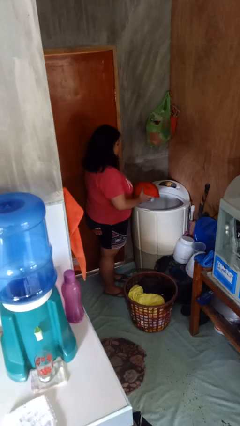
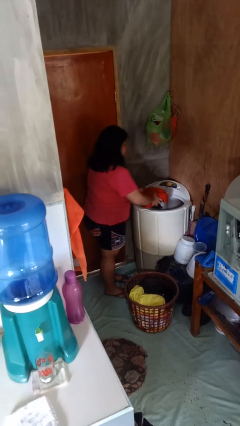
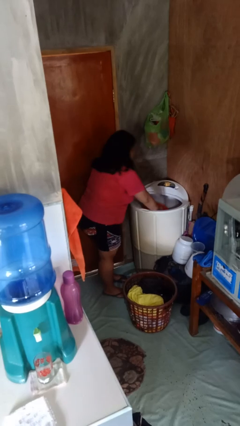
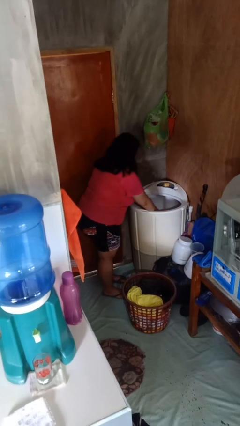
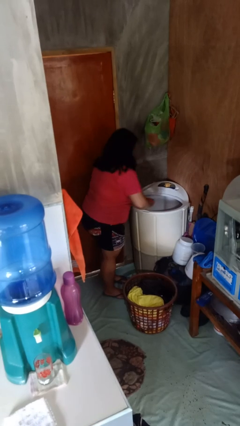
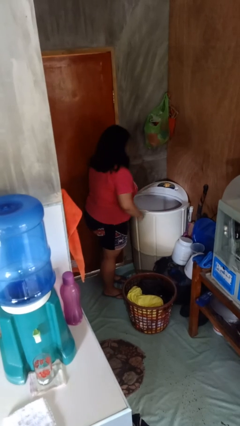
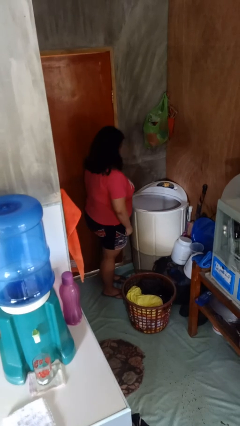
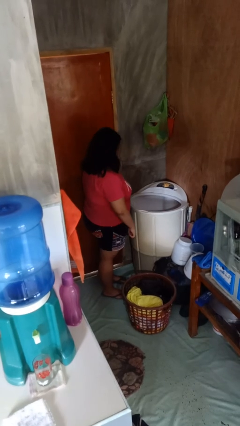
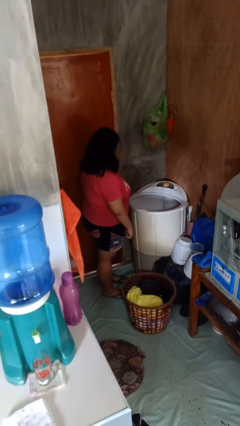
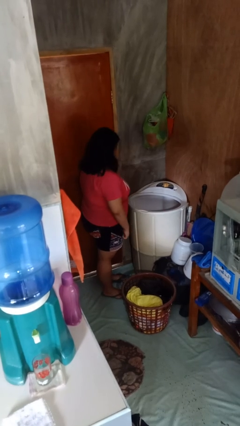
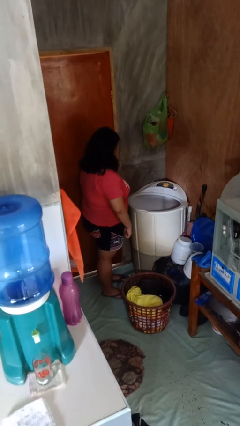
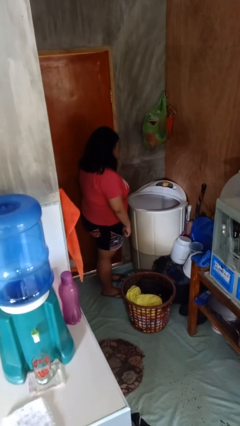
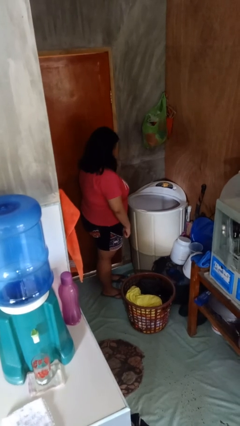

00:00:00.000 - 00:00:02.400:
person loads dryer

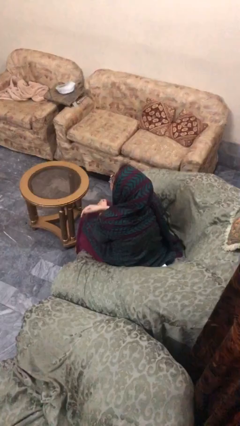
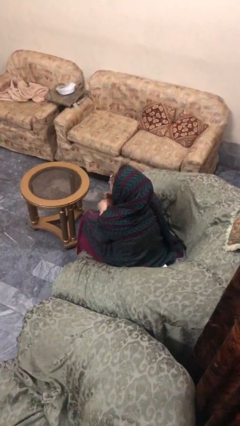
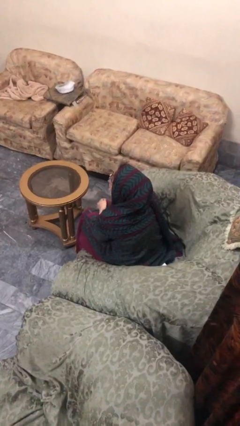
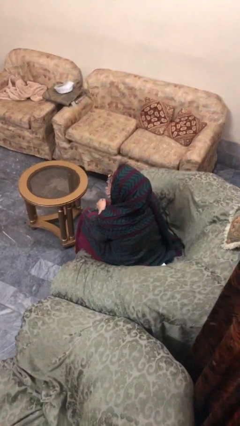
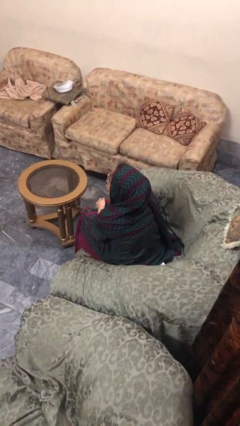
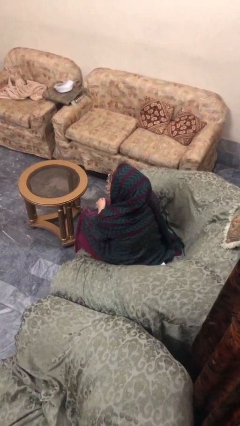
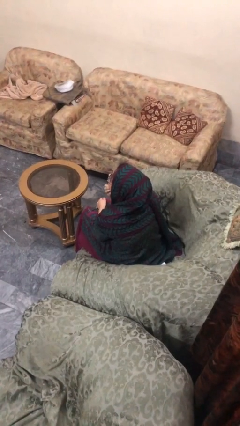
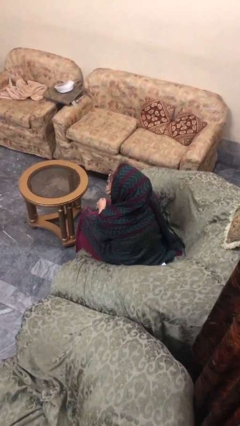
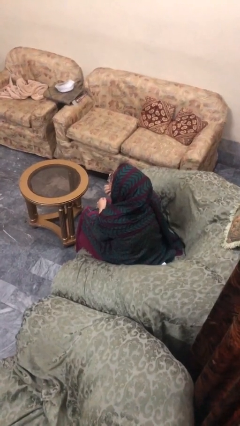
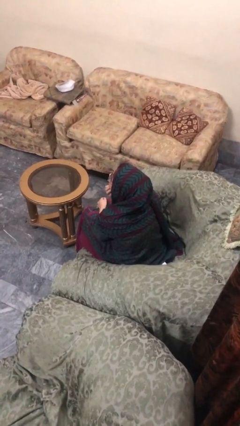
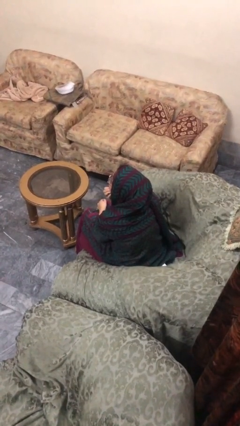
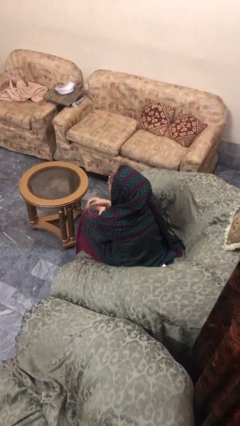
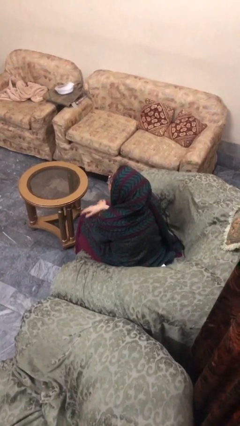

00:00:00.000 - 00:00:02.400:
person strokes chin

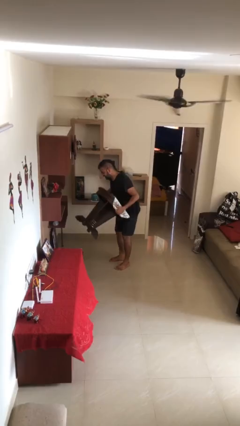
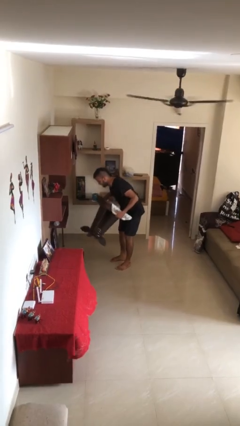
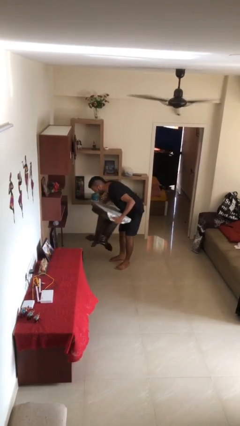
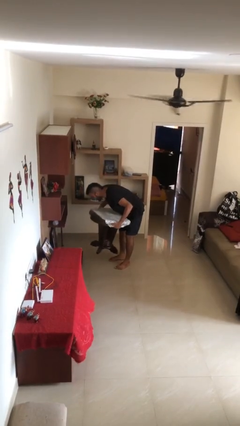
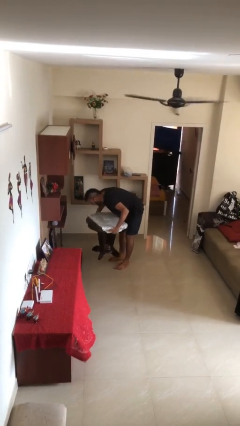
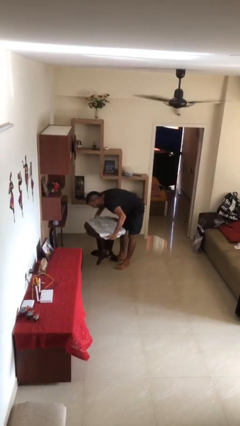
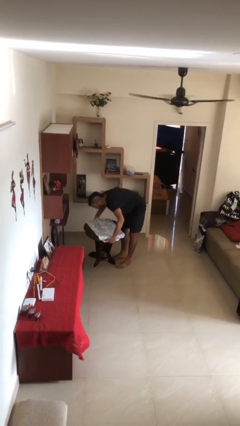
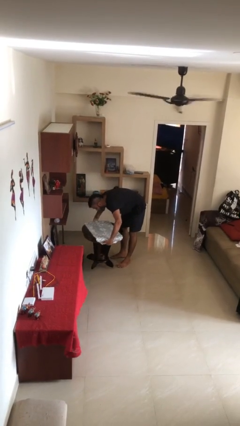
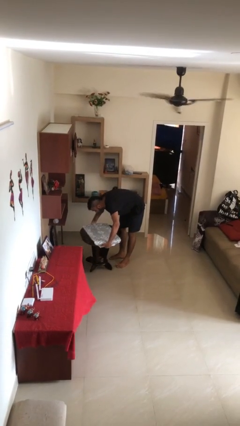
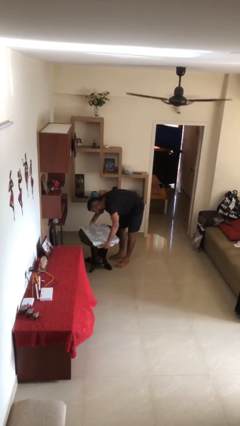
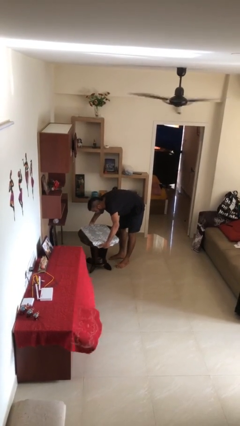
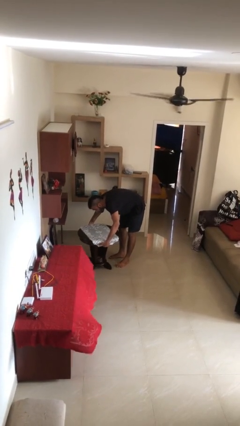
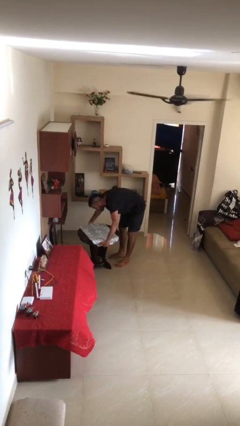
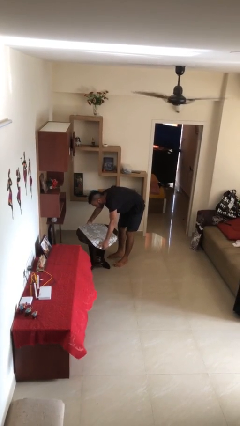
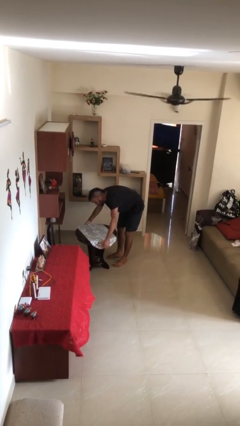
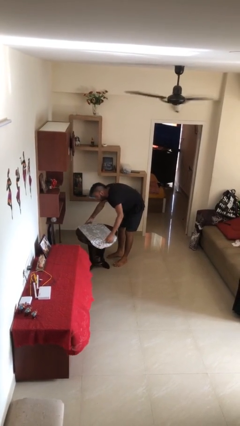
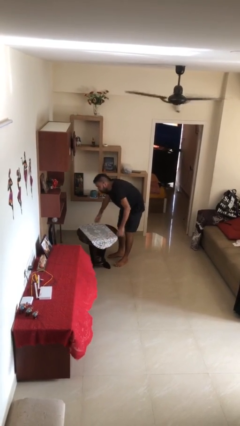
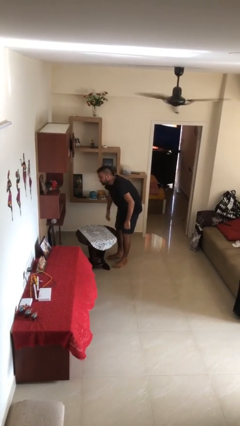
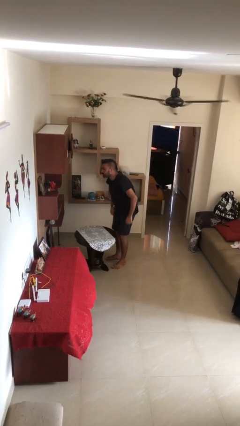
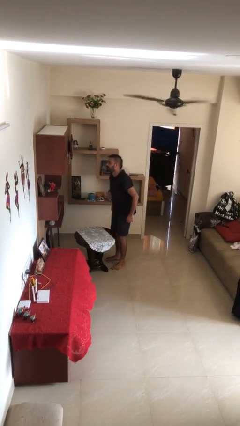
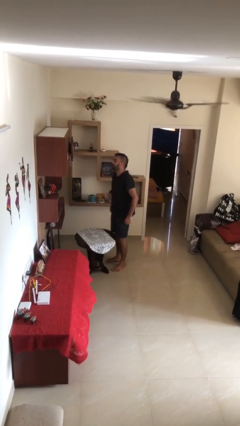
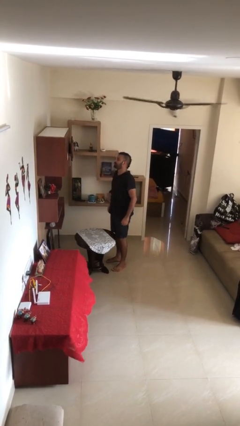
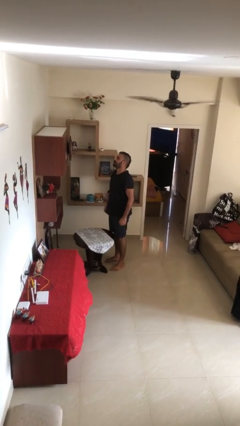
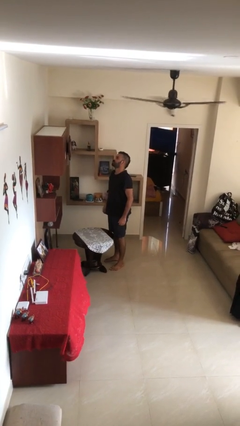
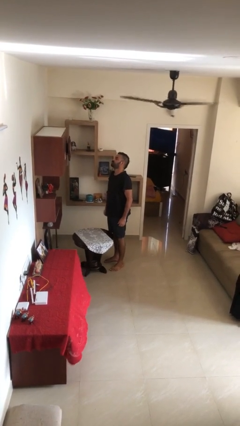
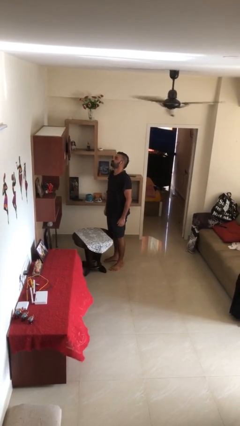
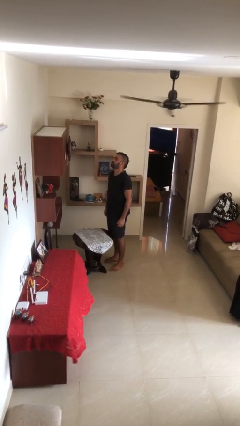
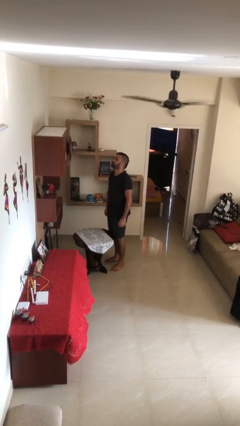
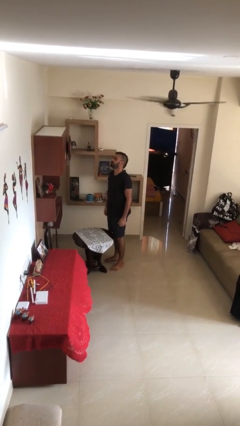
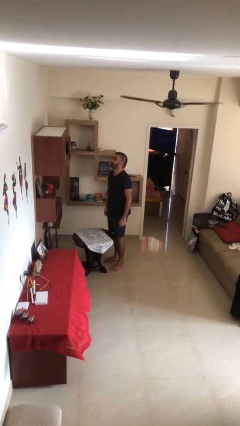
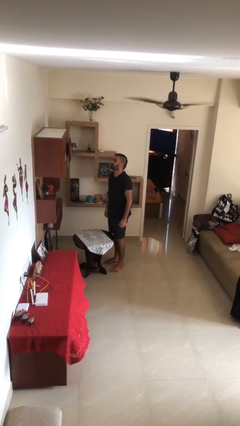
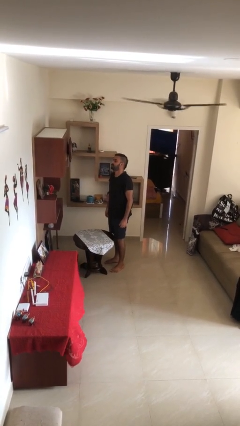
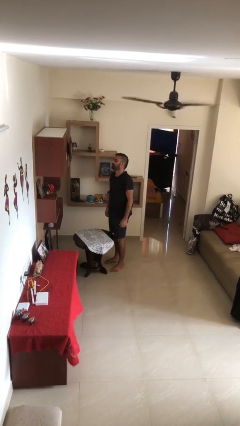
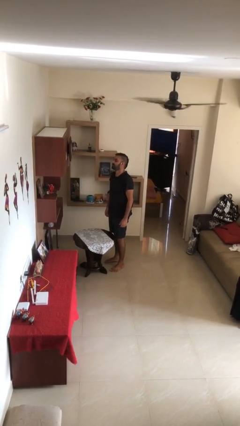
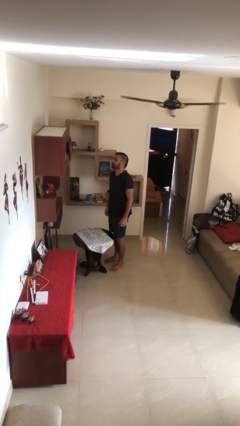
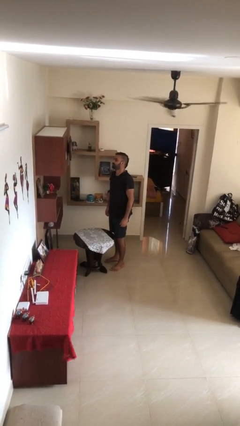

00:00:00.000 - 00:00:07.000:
person puts down object on floor

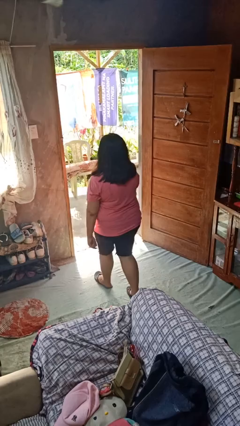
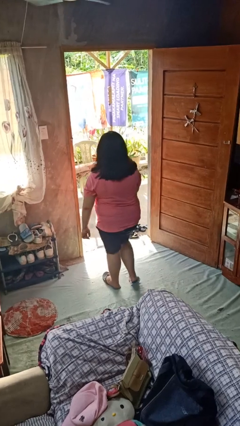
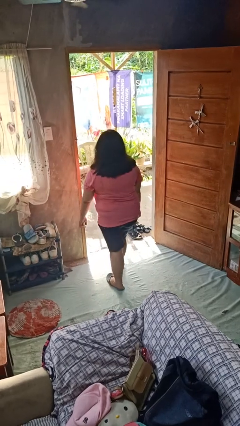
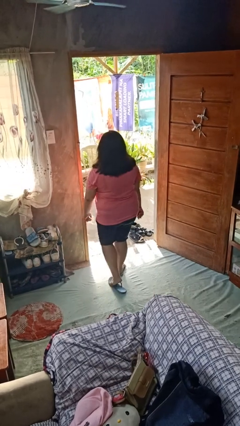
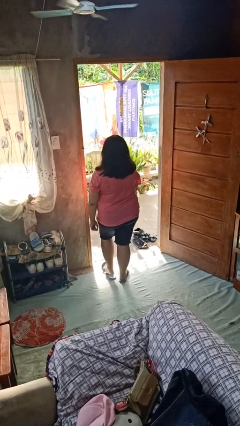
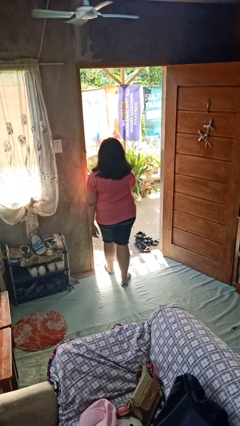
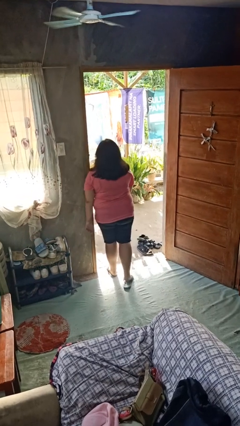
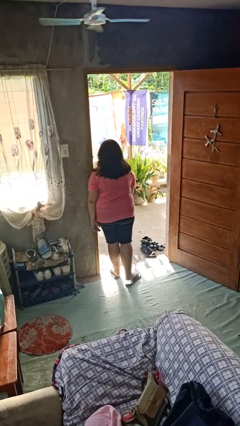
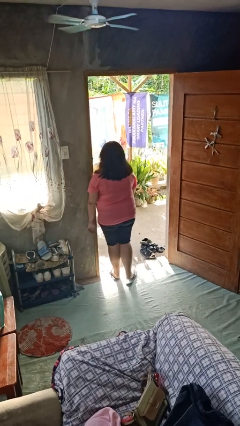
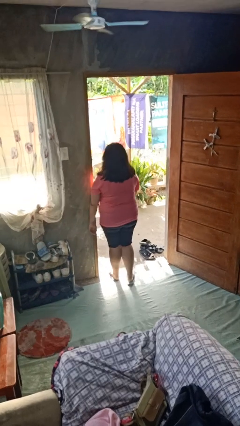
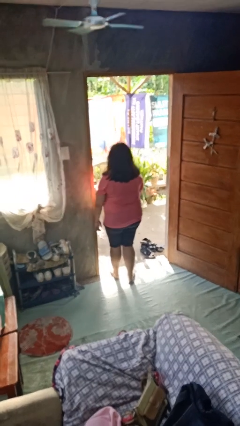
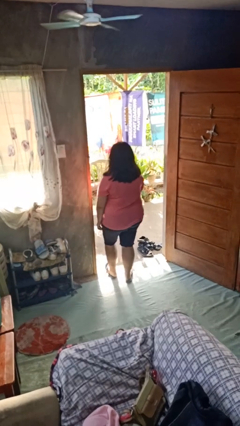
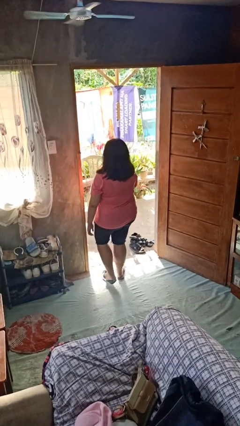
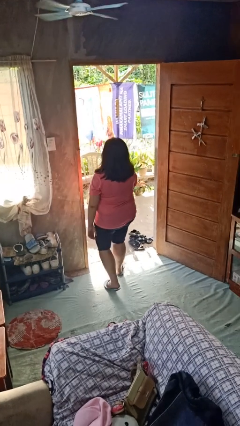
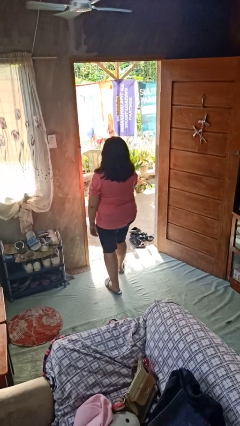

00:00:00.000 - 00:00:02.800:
person bumps into wall

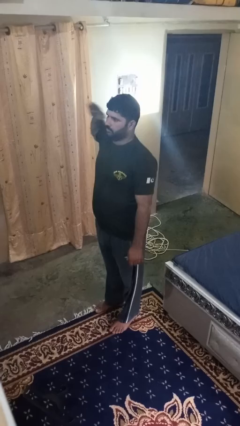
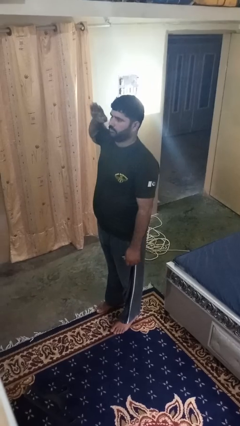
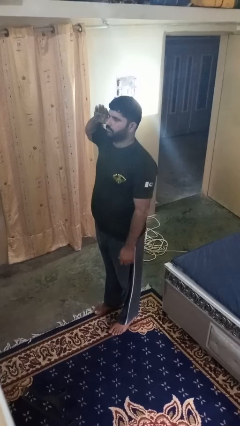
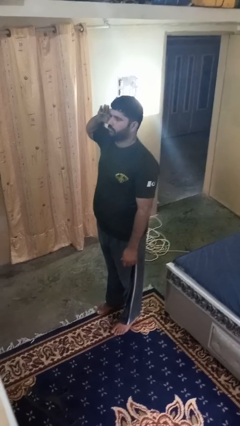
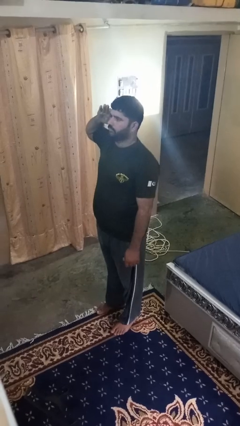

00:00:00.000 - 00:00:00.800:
person salutes

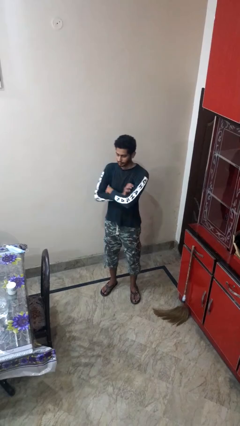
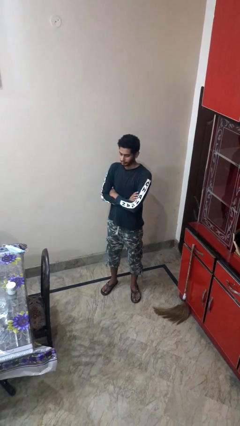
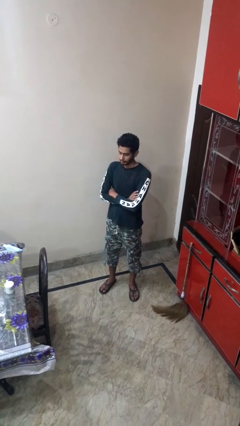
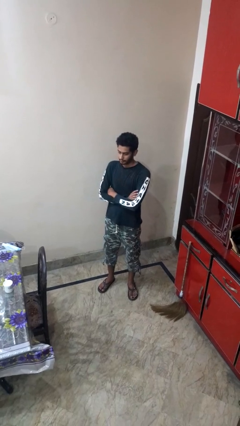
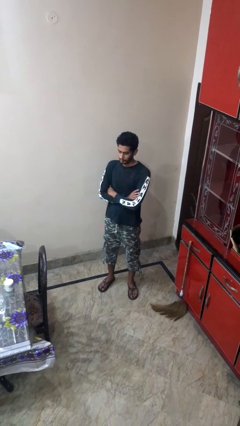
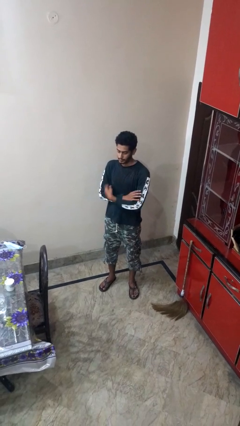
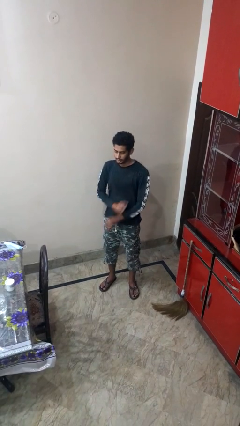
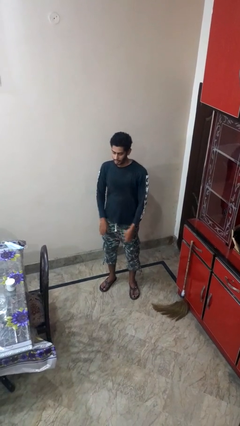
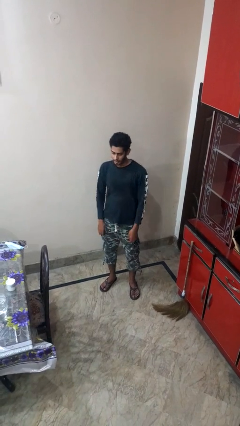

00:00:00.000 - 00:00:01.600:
person crosses arms

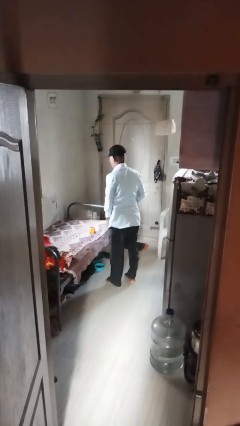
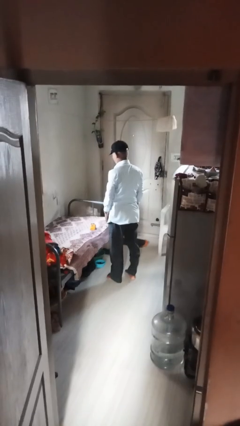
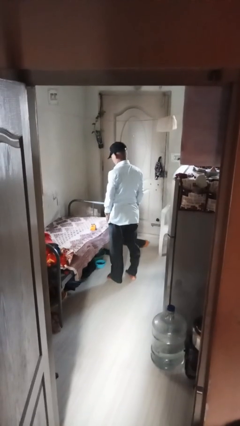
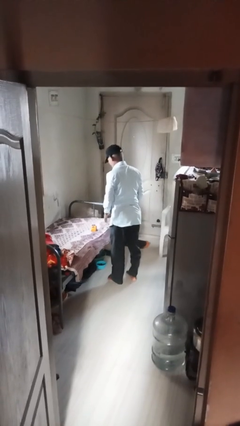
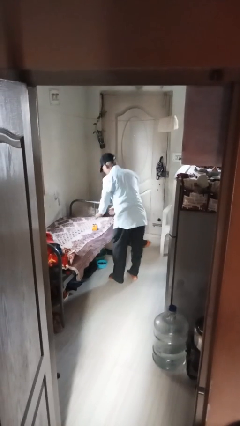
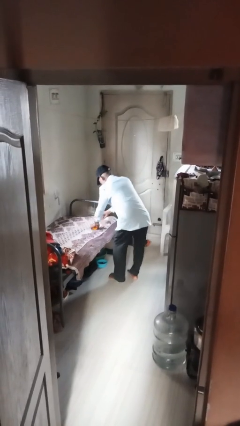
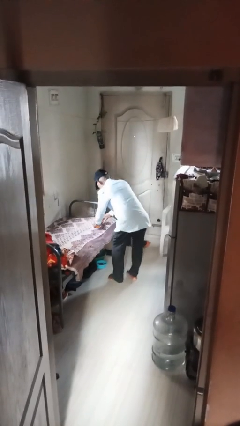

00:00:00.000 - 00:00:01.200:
person applies sunscreen
